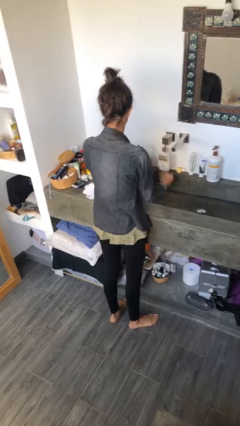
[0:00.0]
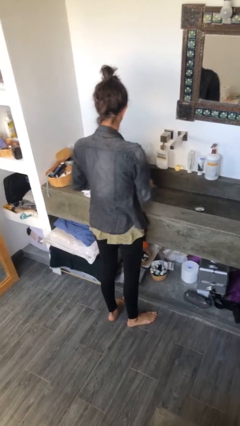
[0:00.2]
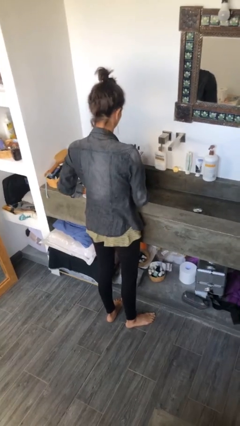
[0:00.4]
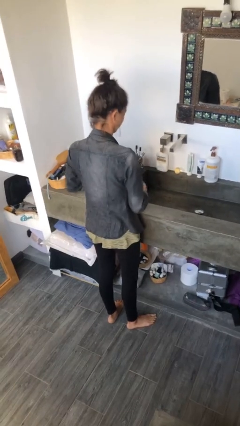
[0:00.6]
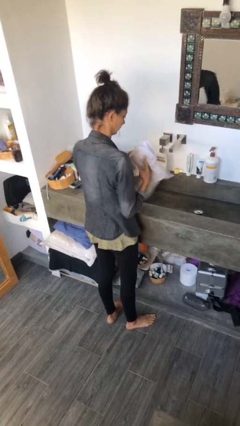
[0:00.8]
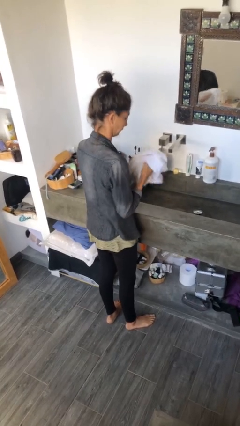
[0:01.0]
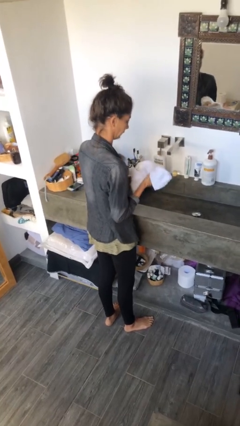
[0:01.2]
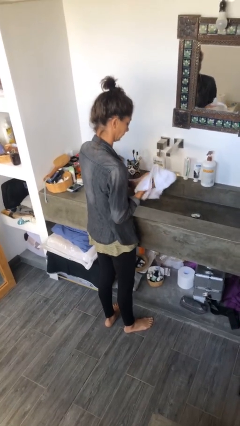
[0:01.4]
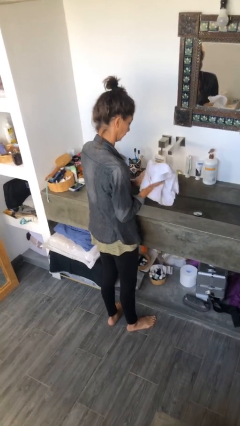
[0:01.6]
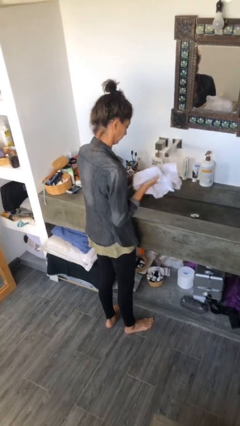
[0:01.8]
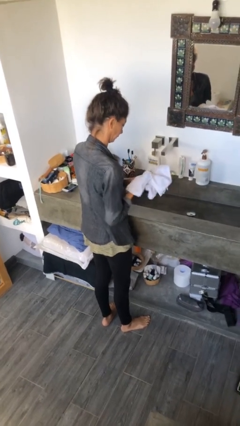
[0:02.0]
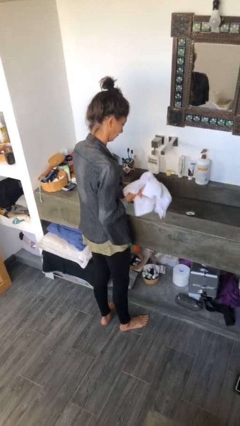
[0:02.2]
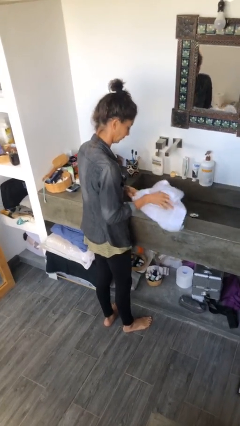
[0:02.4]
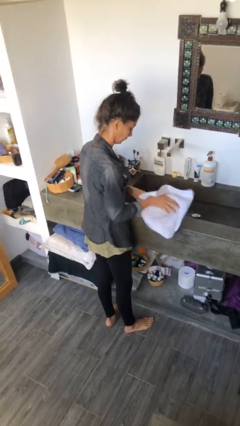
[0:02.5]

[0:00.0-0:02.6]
person dries hands with towel

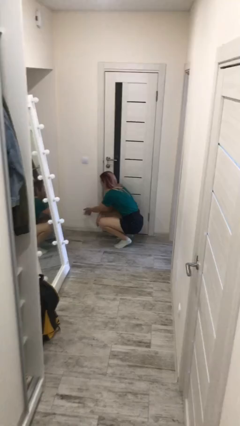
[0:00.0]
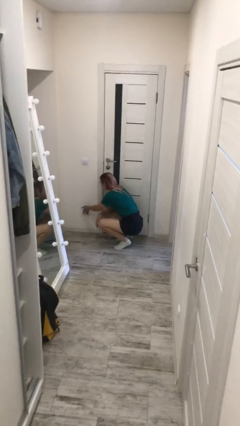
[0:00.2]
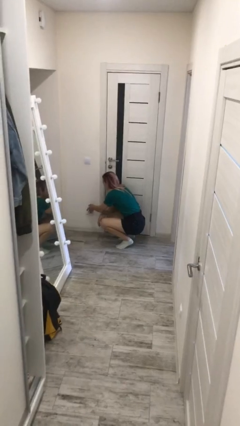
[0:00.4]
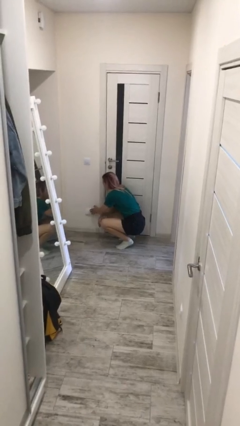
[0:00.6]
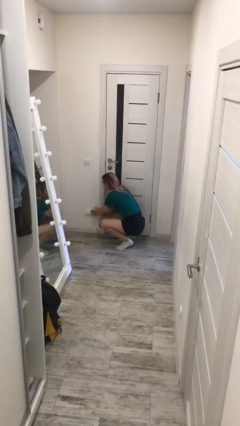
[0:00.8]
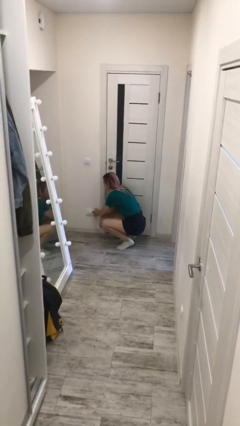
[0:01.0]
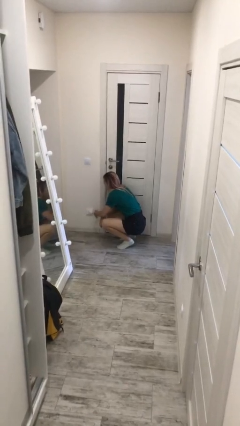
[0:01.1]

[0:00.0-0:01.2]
person adjusts thermostat

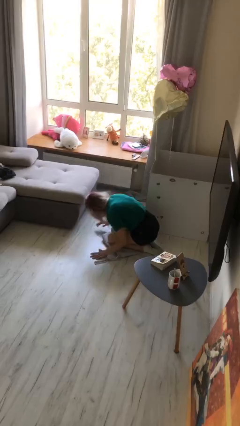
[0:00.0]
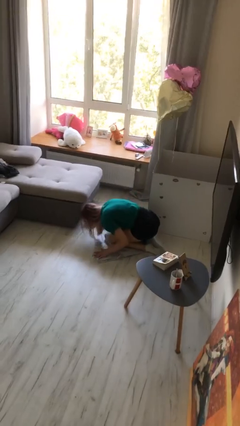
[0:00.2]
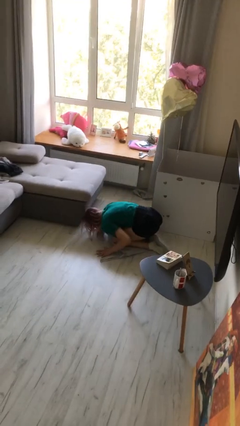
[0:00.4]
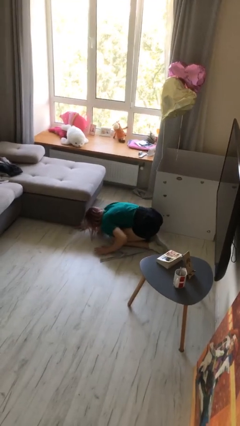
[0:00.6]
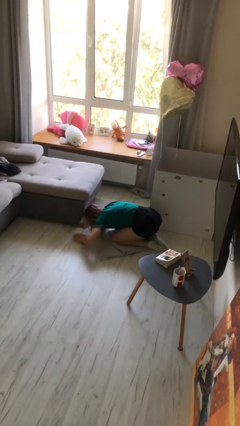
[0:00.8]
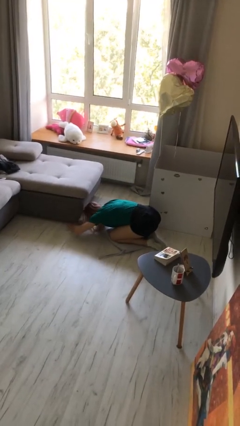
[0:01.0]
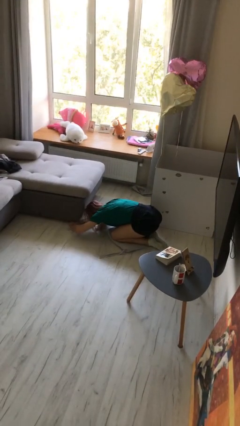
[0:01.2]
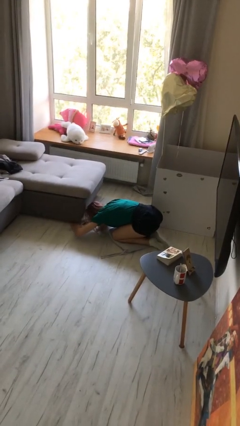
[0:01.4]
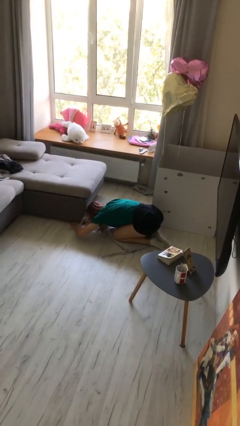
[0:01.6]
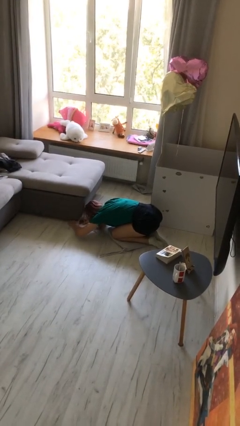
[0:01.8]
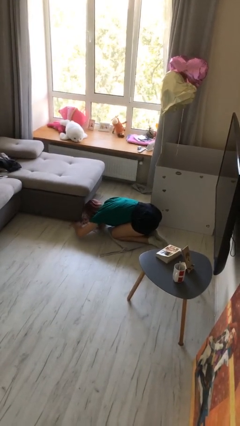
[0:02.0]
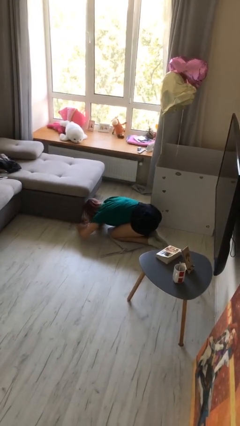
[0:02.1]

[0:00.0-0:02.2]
person searches under bed

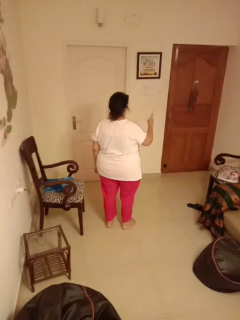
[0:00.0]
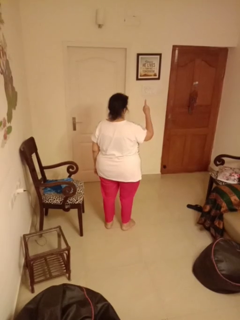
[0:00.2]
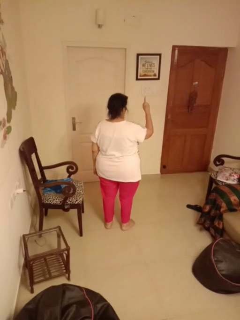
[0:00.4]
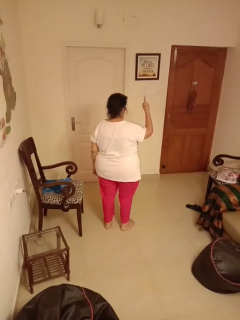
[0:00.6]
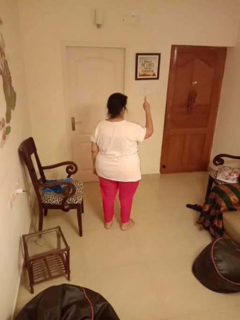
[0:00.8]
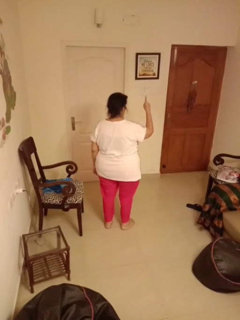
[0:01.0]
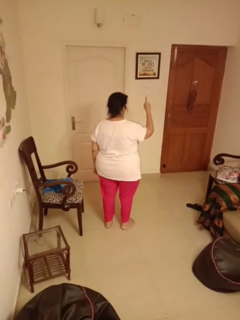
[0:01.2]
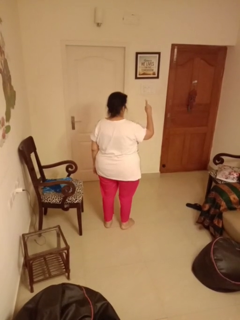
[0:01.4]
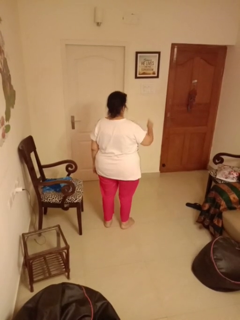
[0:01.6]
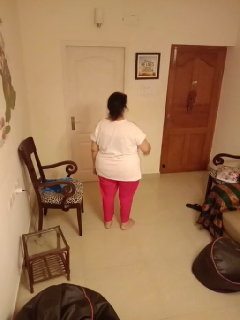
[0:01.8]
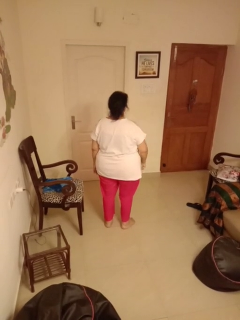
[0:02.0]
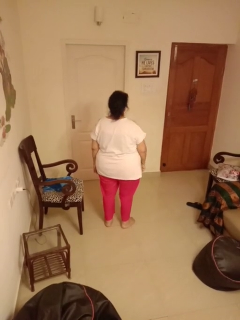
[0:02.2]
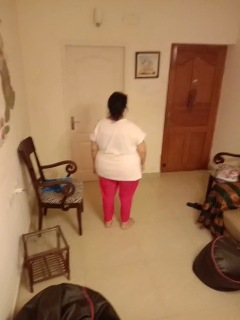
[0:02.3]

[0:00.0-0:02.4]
person gestures number one

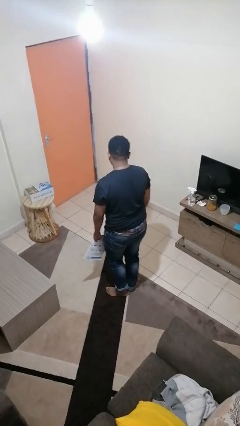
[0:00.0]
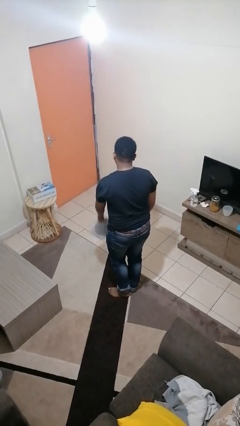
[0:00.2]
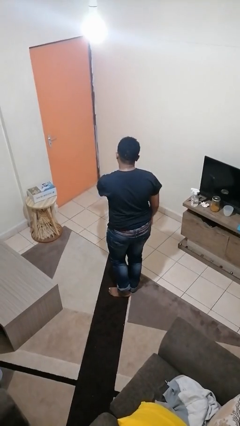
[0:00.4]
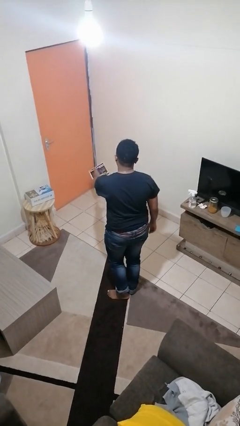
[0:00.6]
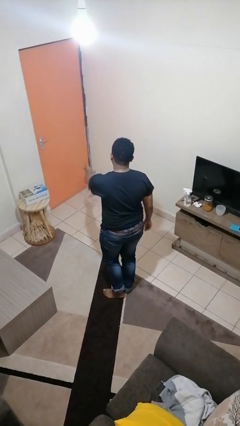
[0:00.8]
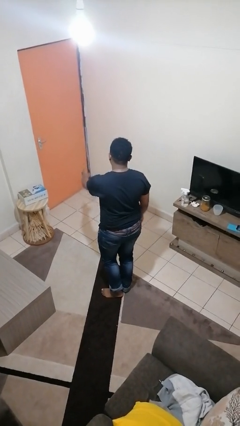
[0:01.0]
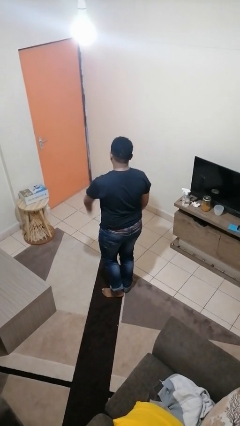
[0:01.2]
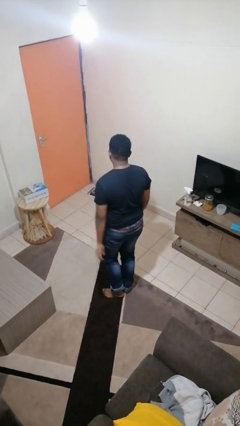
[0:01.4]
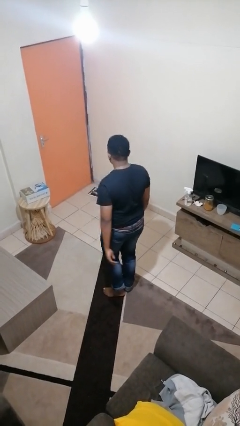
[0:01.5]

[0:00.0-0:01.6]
person throws object to ground

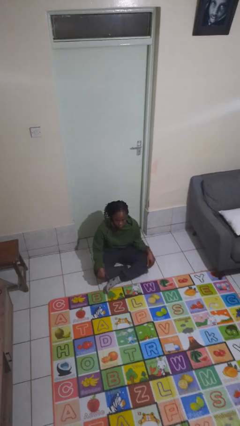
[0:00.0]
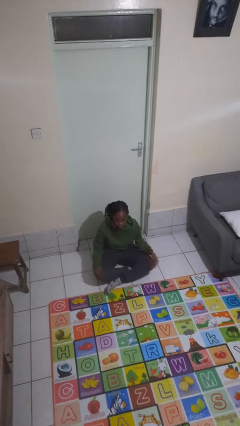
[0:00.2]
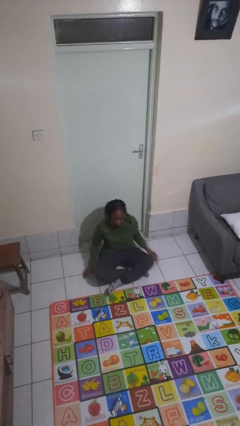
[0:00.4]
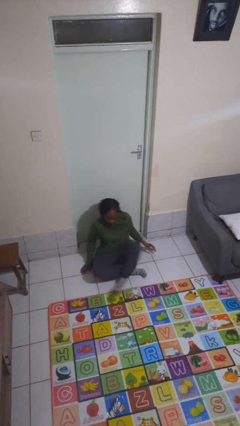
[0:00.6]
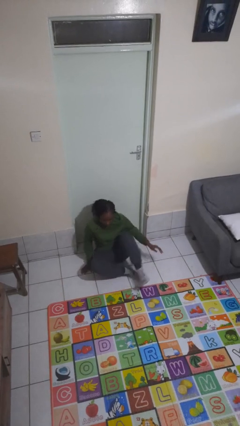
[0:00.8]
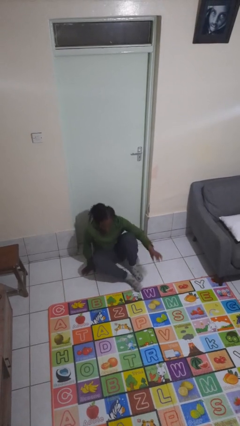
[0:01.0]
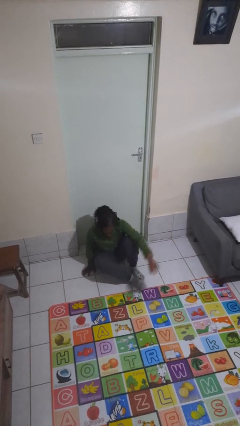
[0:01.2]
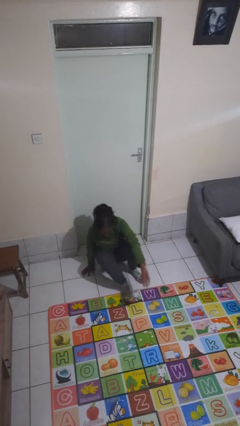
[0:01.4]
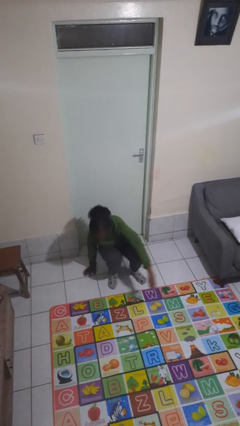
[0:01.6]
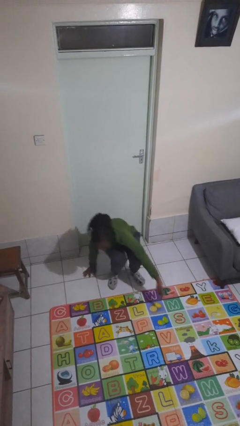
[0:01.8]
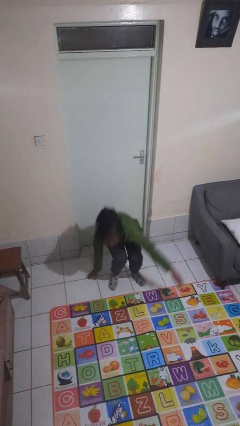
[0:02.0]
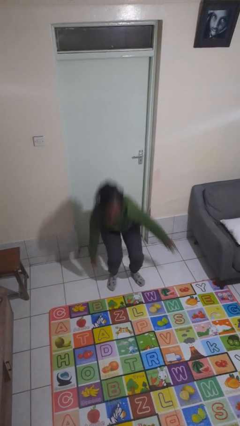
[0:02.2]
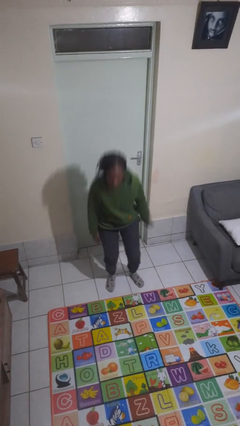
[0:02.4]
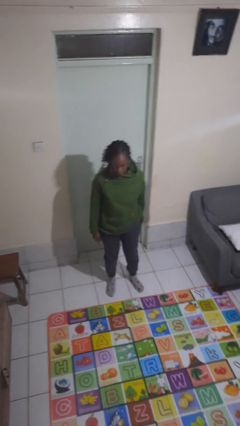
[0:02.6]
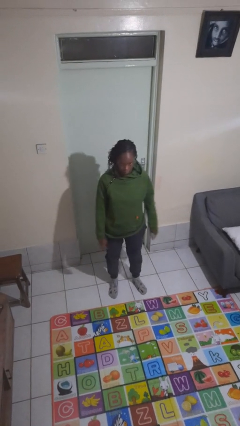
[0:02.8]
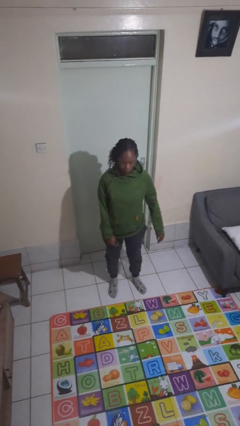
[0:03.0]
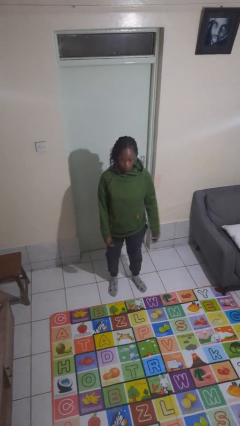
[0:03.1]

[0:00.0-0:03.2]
person stands up from floor

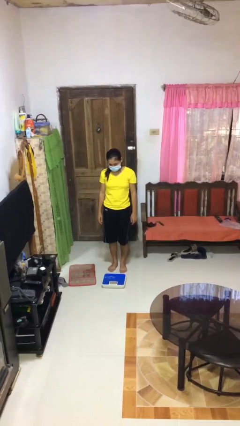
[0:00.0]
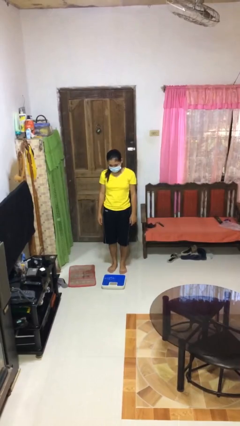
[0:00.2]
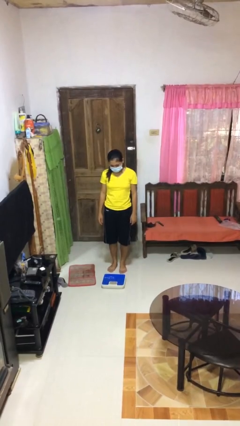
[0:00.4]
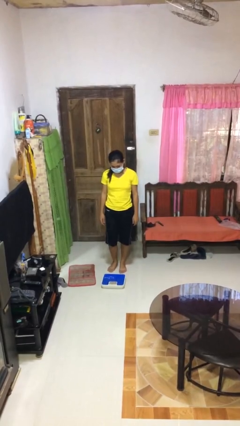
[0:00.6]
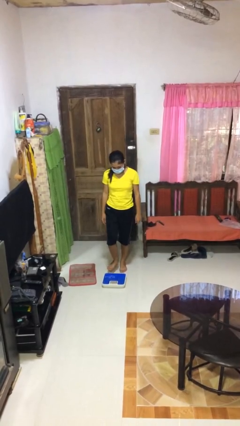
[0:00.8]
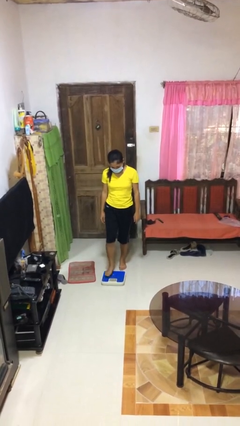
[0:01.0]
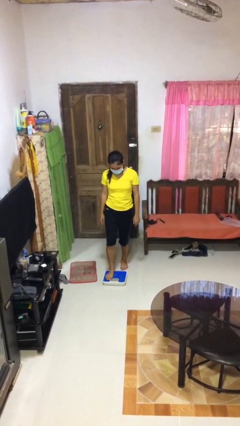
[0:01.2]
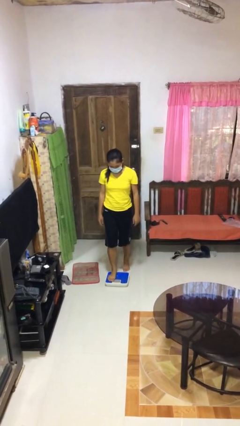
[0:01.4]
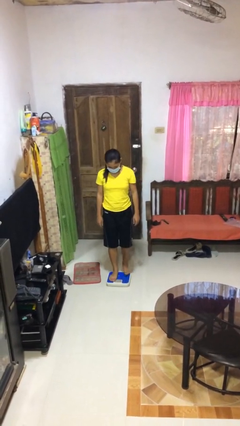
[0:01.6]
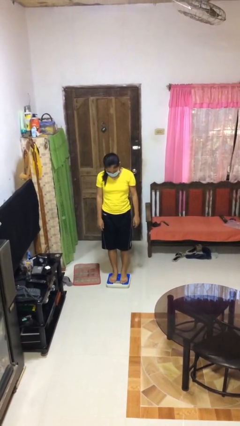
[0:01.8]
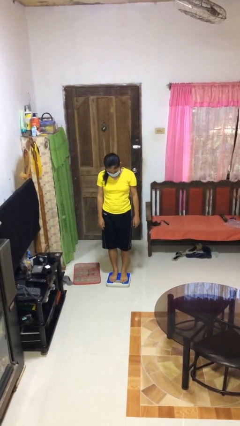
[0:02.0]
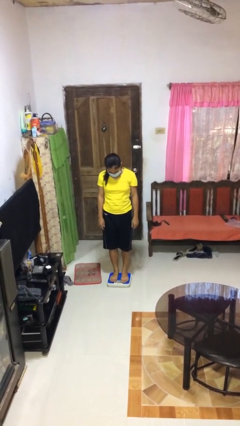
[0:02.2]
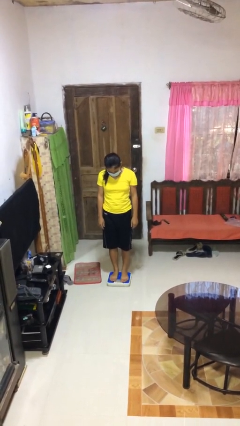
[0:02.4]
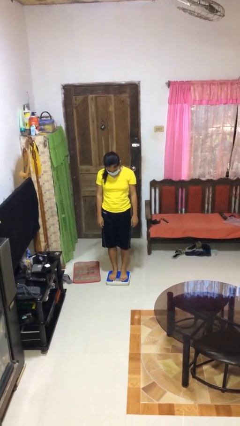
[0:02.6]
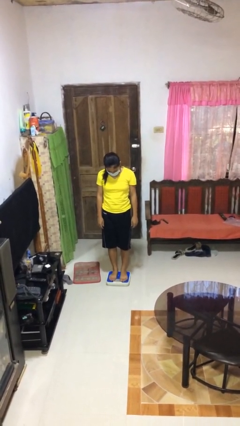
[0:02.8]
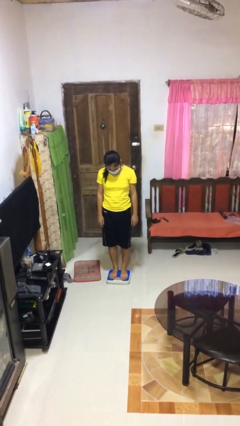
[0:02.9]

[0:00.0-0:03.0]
person uses bodyweight scale

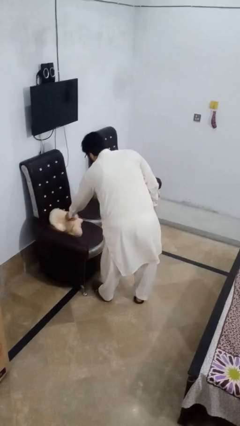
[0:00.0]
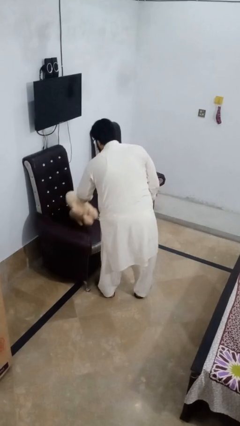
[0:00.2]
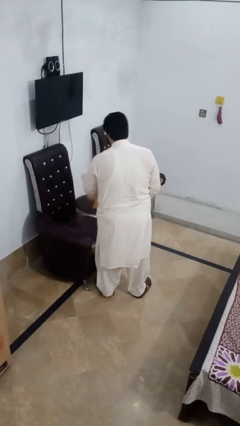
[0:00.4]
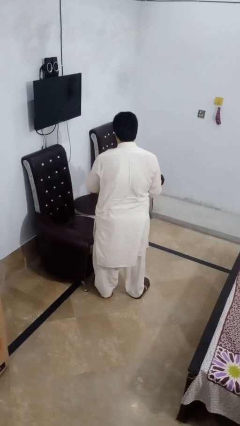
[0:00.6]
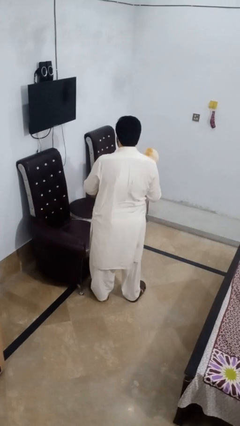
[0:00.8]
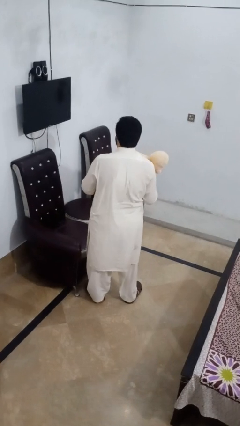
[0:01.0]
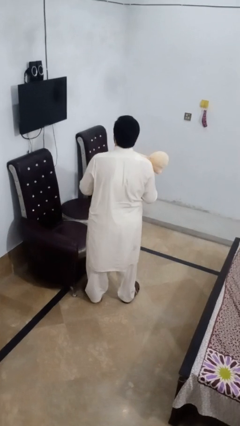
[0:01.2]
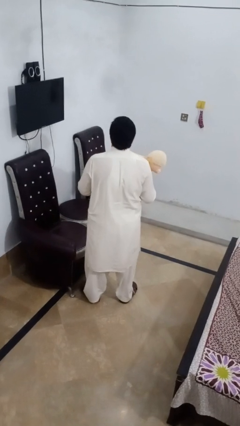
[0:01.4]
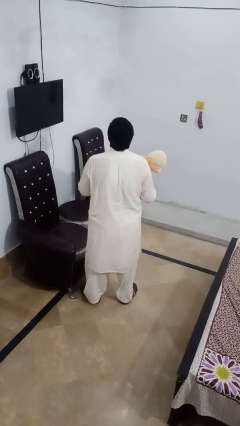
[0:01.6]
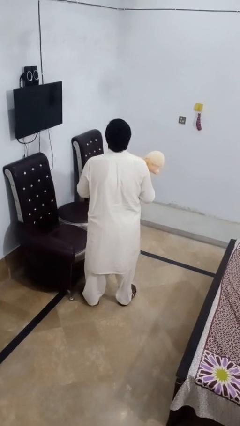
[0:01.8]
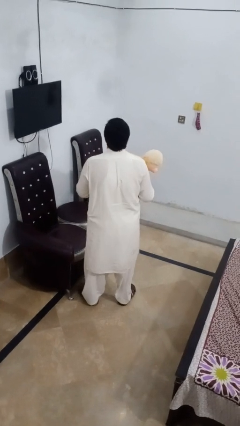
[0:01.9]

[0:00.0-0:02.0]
person picks up object from couch
